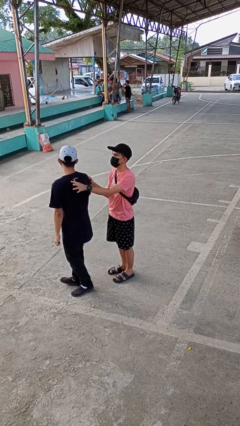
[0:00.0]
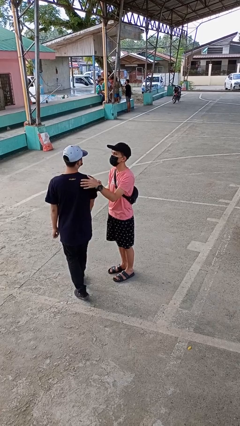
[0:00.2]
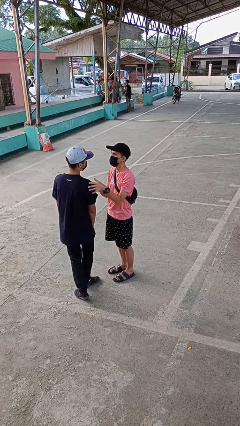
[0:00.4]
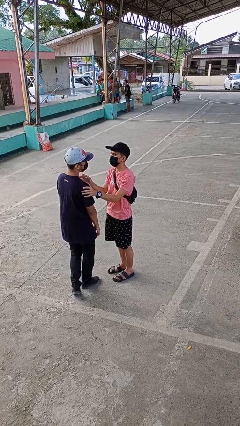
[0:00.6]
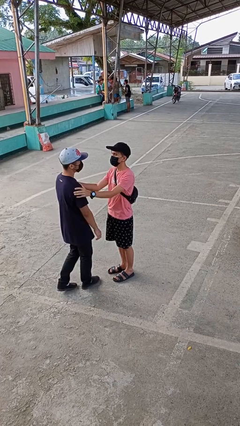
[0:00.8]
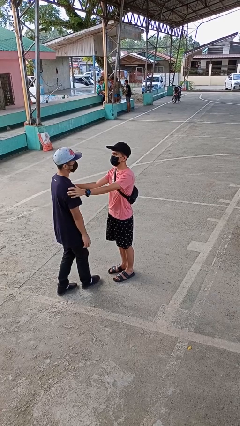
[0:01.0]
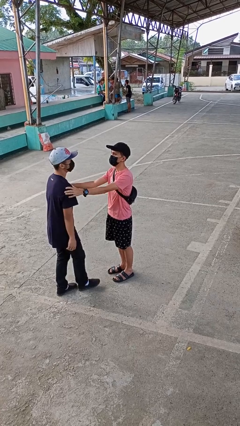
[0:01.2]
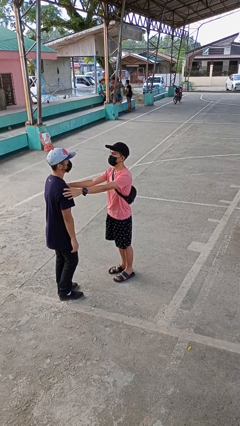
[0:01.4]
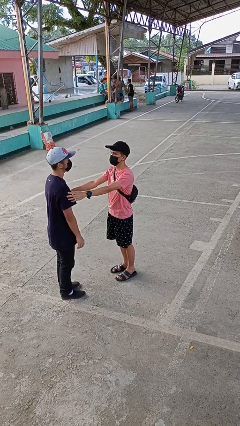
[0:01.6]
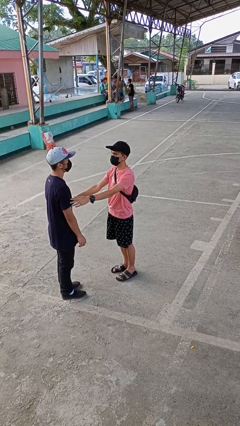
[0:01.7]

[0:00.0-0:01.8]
person spins person around

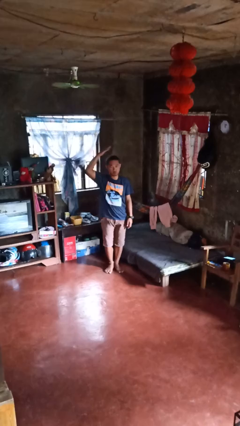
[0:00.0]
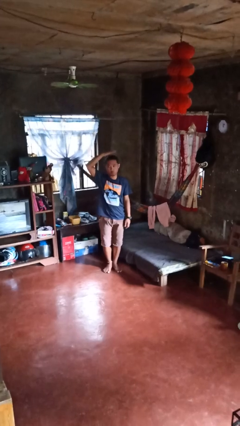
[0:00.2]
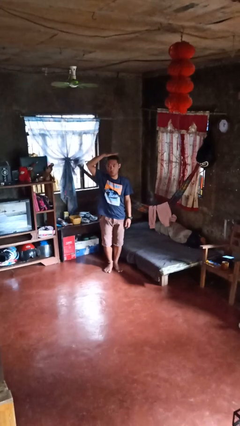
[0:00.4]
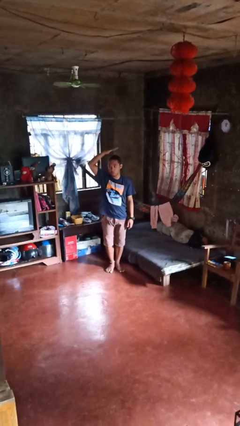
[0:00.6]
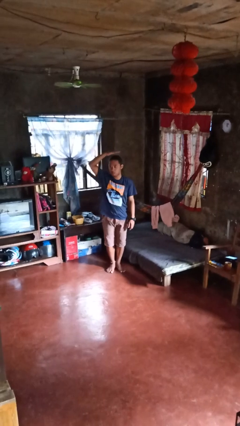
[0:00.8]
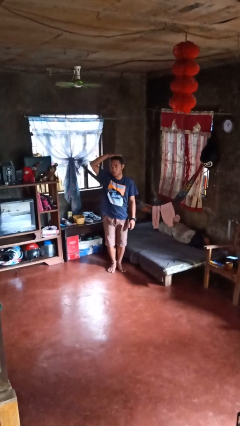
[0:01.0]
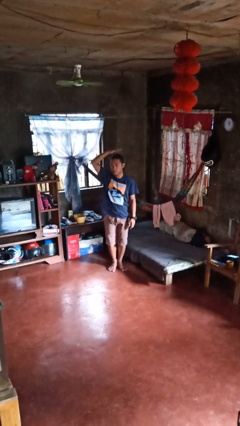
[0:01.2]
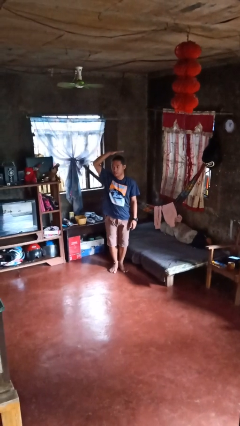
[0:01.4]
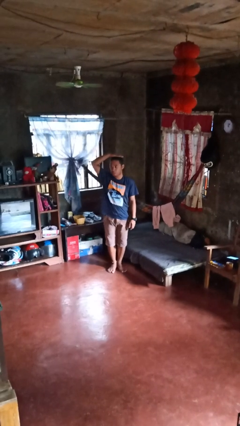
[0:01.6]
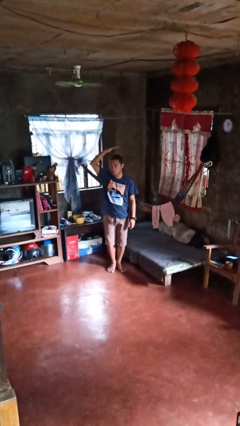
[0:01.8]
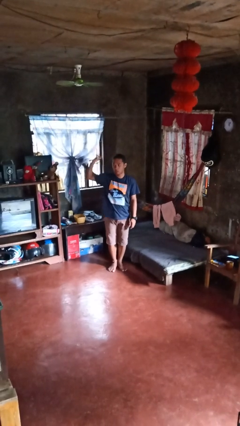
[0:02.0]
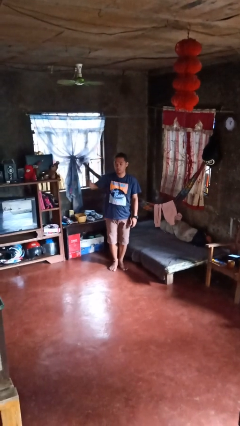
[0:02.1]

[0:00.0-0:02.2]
person pats head

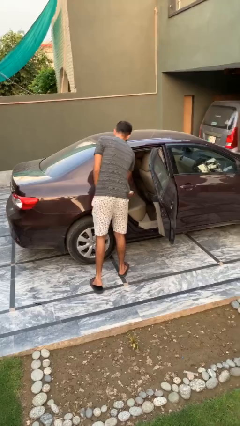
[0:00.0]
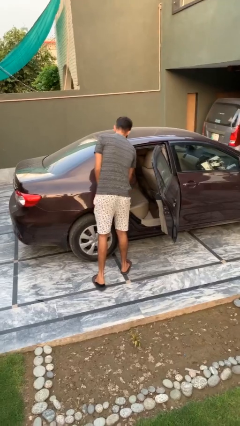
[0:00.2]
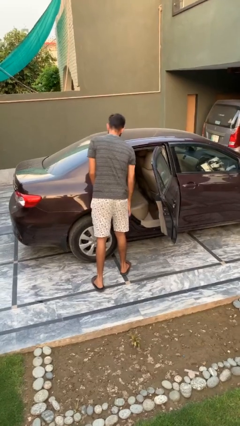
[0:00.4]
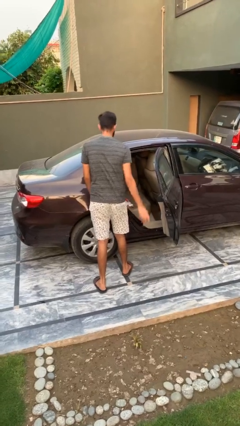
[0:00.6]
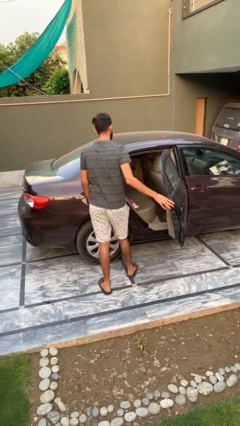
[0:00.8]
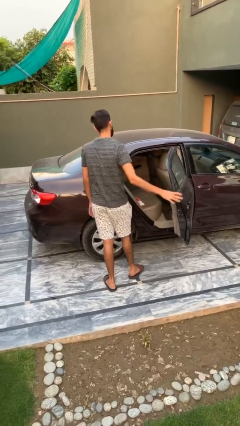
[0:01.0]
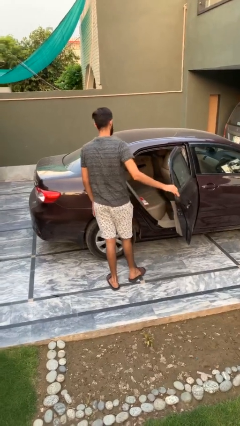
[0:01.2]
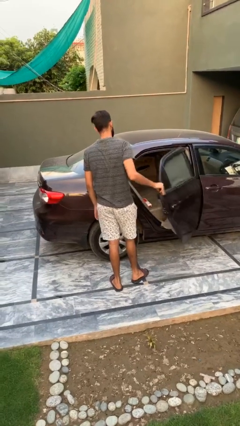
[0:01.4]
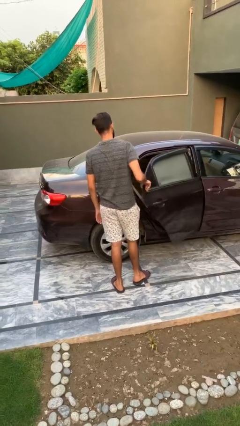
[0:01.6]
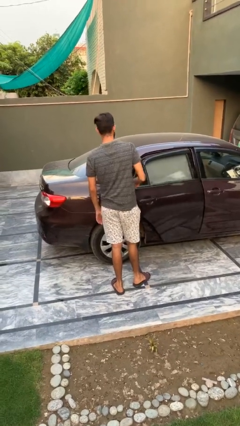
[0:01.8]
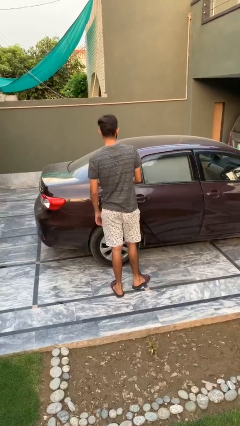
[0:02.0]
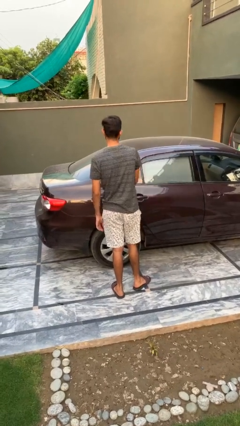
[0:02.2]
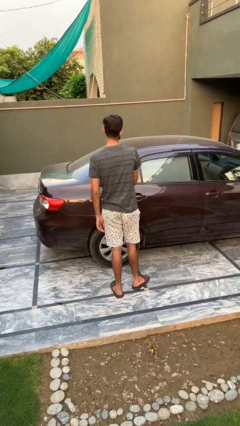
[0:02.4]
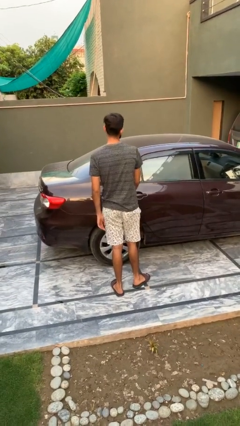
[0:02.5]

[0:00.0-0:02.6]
person closes car door

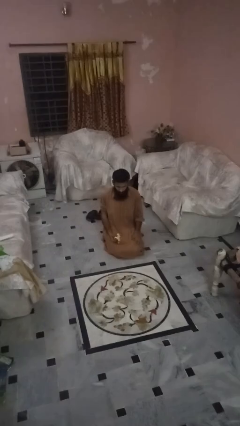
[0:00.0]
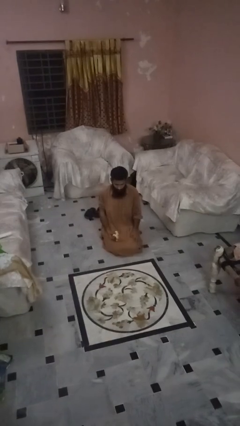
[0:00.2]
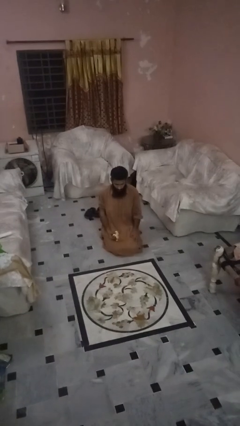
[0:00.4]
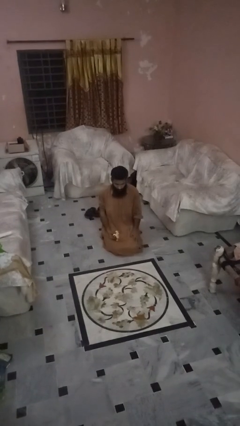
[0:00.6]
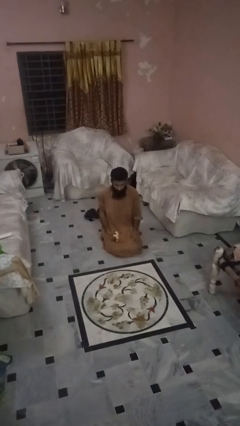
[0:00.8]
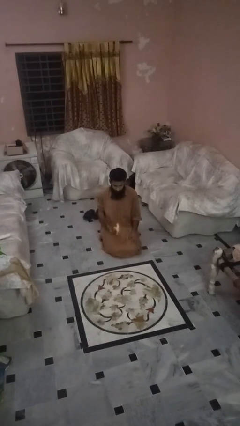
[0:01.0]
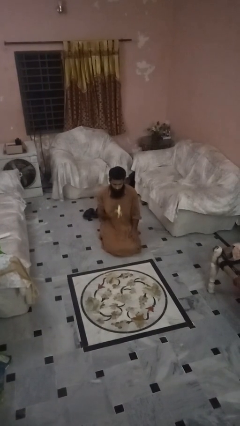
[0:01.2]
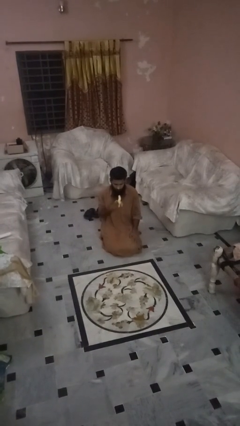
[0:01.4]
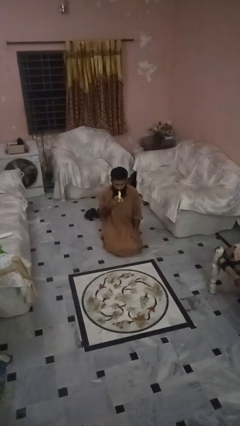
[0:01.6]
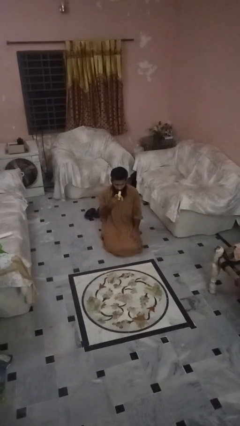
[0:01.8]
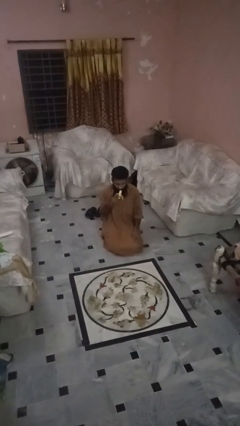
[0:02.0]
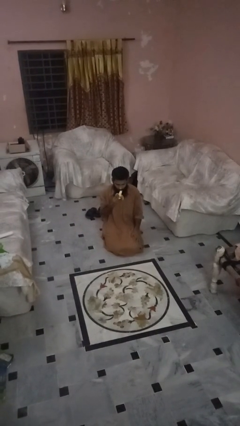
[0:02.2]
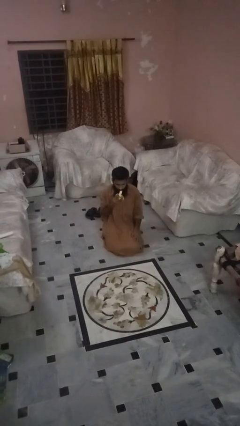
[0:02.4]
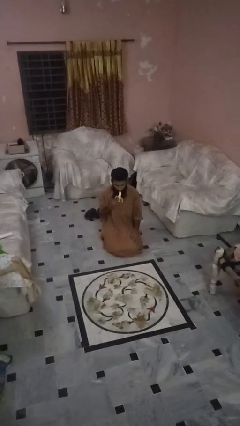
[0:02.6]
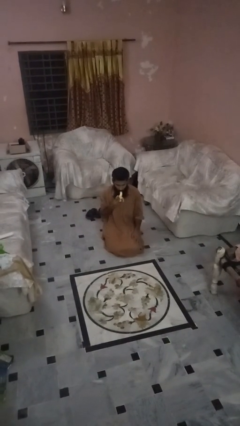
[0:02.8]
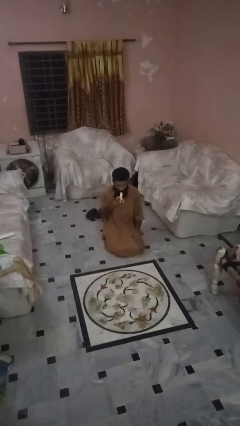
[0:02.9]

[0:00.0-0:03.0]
person eats banana

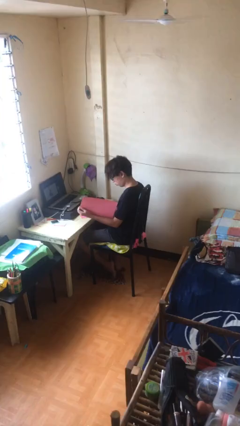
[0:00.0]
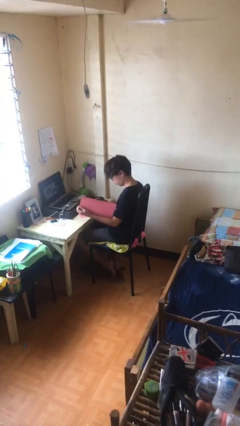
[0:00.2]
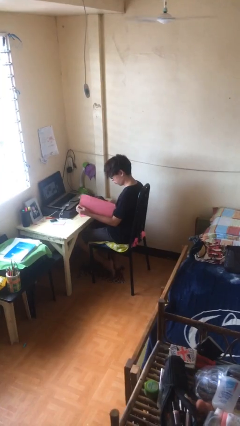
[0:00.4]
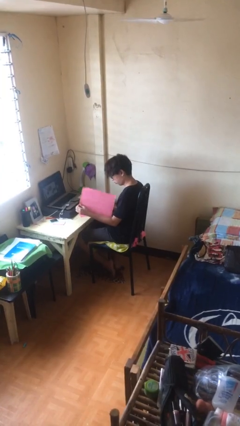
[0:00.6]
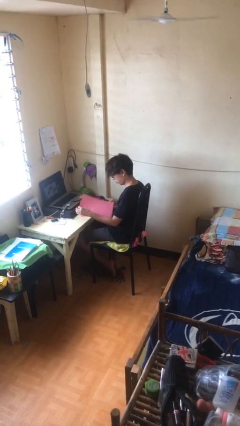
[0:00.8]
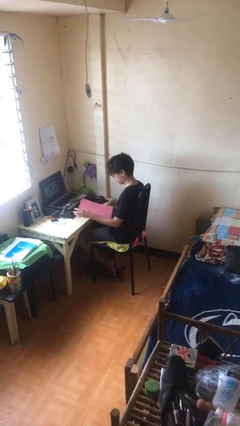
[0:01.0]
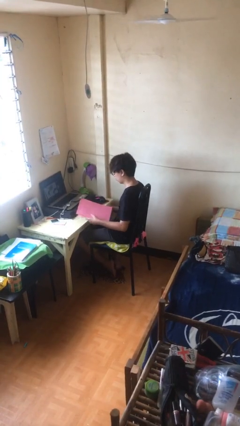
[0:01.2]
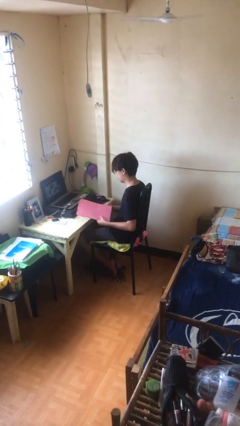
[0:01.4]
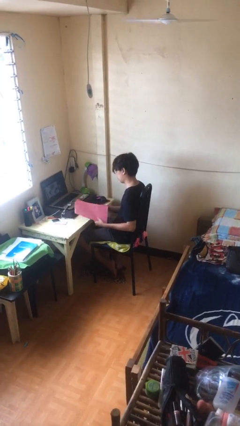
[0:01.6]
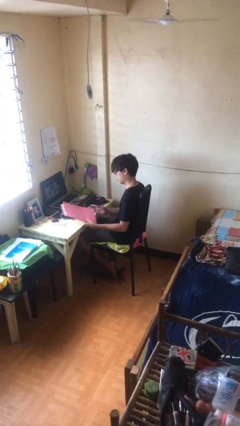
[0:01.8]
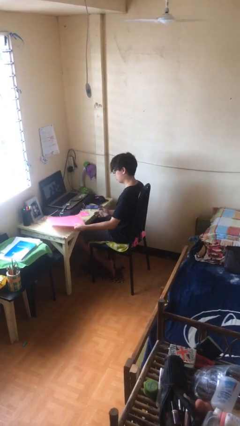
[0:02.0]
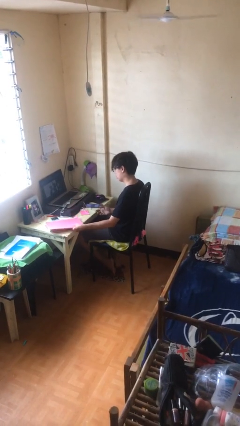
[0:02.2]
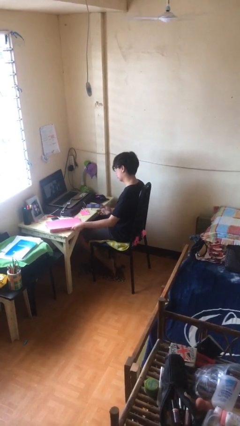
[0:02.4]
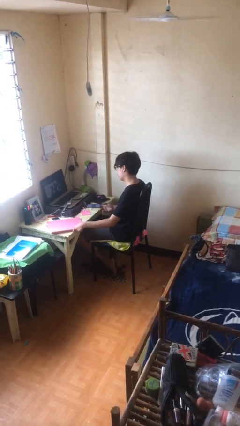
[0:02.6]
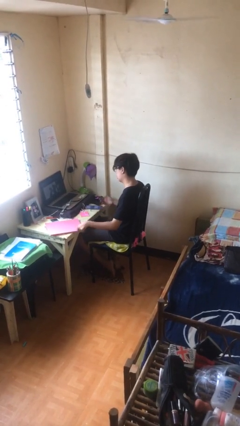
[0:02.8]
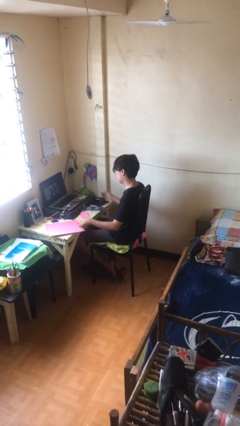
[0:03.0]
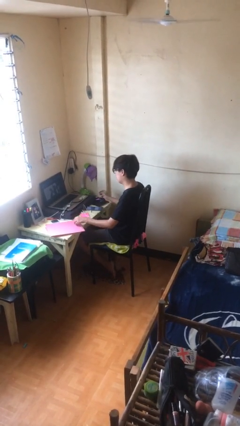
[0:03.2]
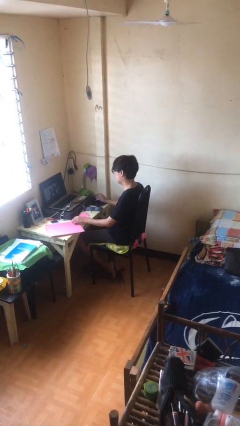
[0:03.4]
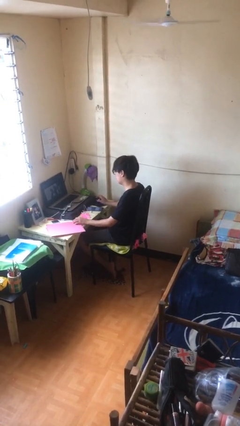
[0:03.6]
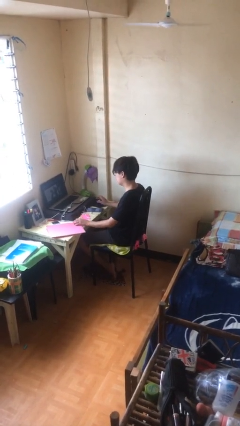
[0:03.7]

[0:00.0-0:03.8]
person puts down object on table

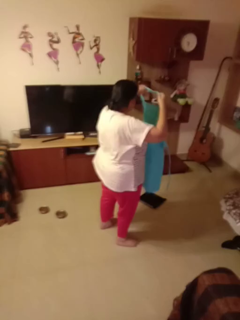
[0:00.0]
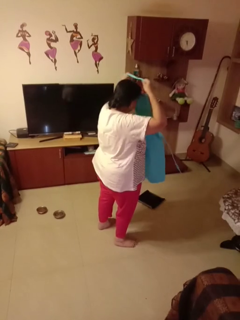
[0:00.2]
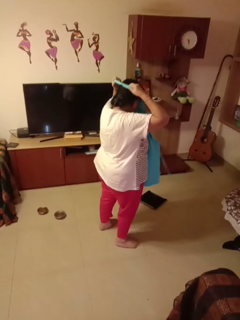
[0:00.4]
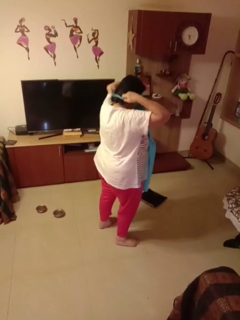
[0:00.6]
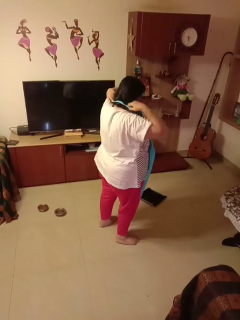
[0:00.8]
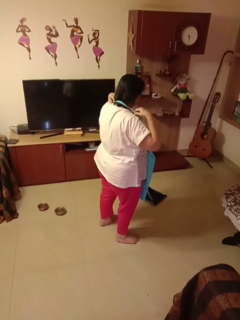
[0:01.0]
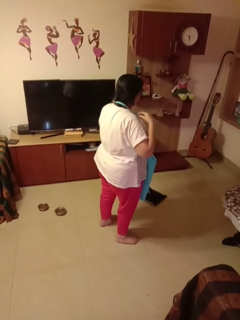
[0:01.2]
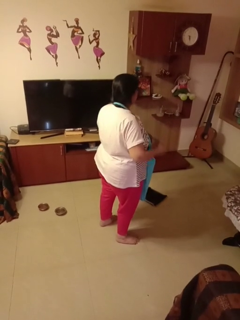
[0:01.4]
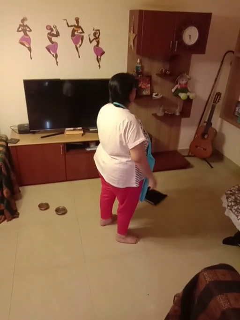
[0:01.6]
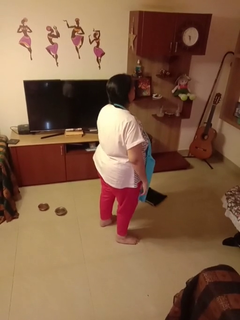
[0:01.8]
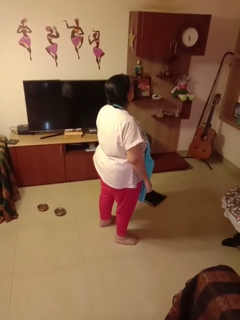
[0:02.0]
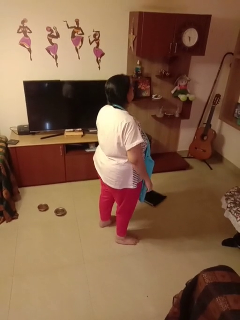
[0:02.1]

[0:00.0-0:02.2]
person puts on apron

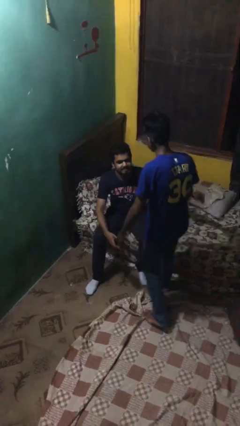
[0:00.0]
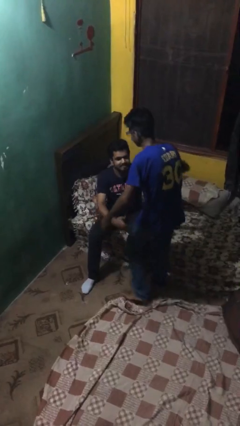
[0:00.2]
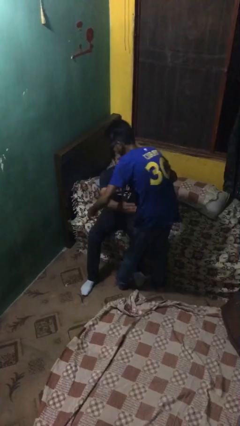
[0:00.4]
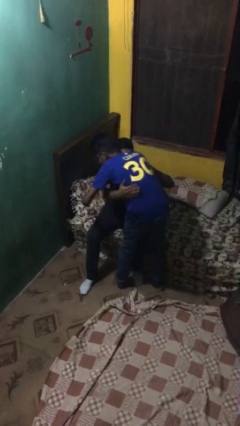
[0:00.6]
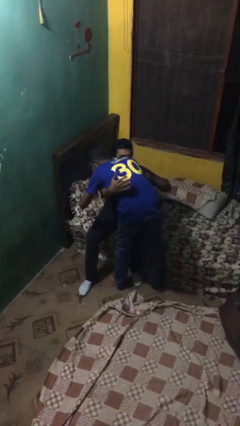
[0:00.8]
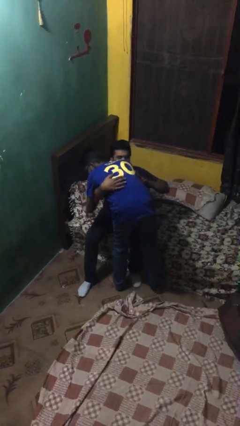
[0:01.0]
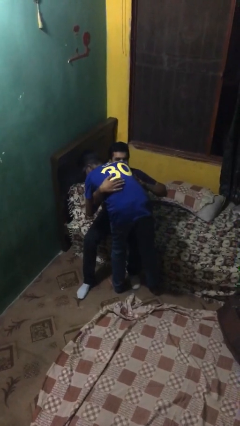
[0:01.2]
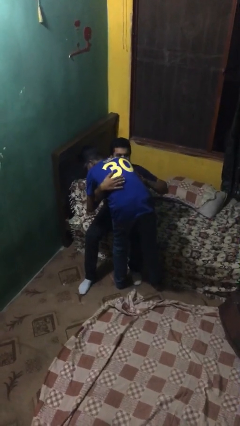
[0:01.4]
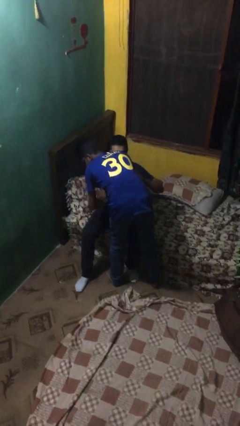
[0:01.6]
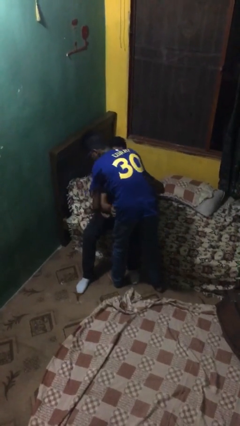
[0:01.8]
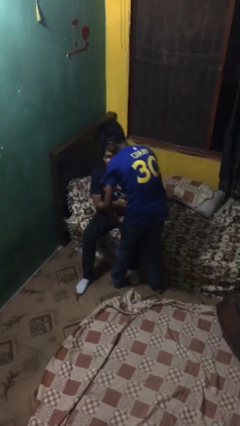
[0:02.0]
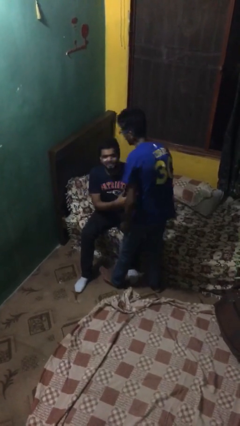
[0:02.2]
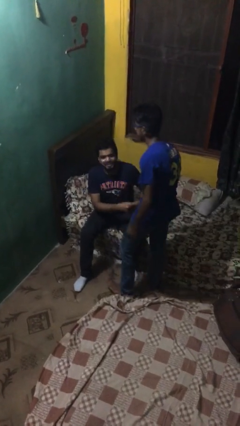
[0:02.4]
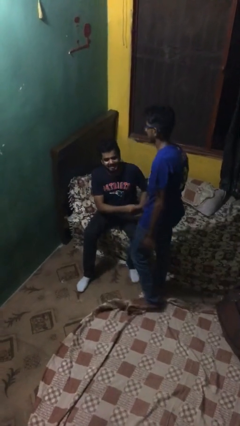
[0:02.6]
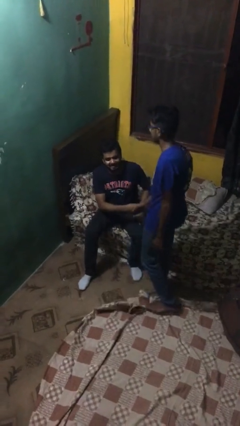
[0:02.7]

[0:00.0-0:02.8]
person embraces person
